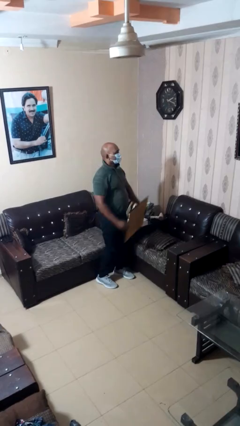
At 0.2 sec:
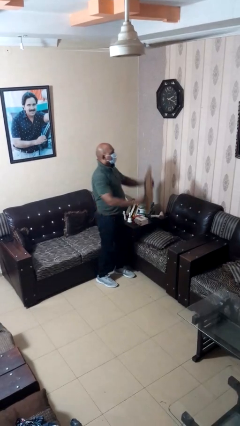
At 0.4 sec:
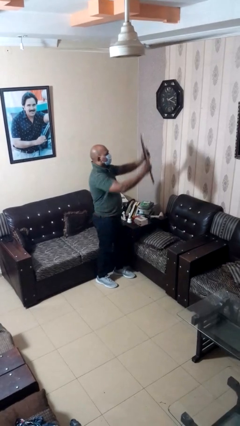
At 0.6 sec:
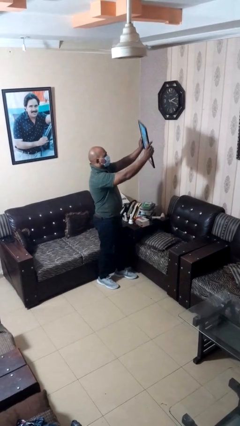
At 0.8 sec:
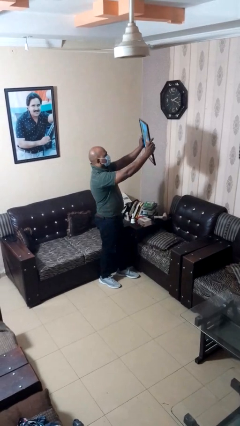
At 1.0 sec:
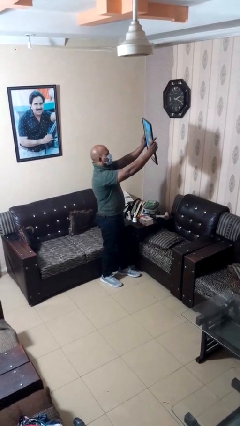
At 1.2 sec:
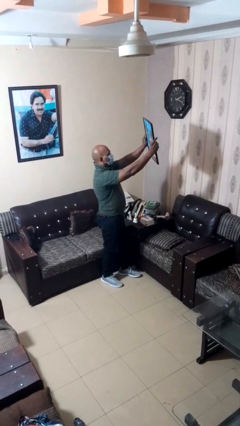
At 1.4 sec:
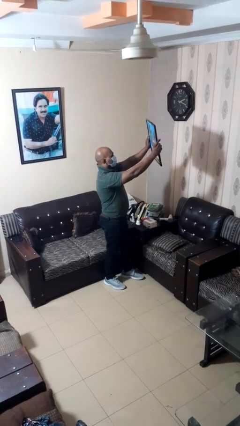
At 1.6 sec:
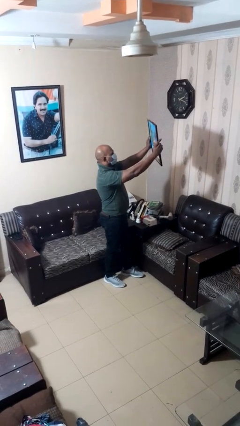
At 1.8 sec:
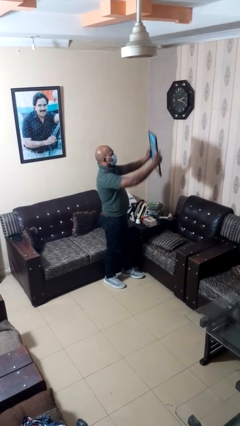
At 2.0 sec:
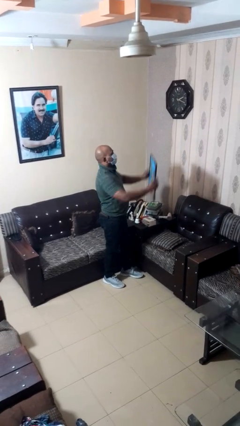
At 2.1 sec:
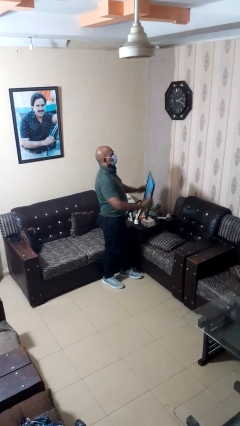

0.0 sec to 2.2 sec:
person holds object above head

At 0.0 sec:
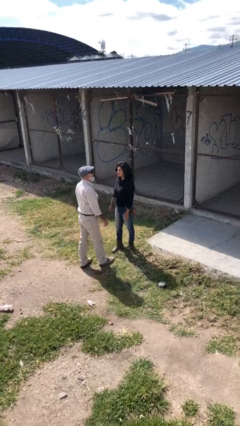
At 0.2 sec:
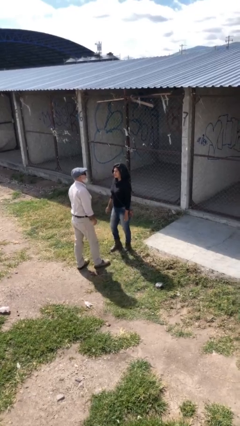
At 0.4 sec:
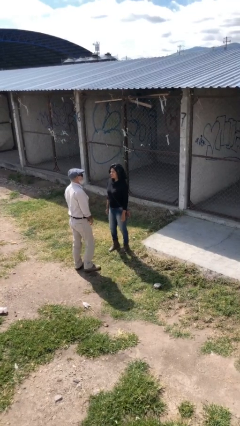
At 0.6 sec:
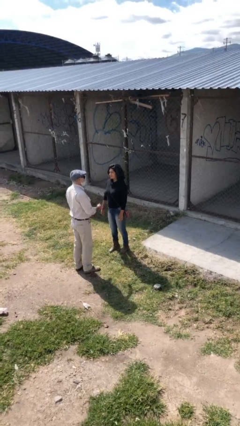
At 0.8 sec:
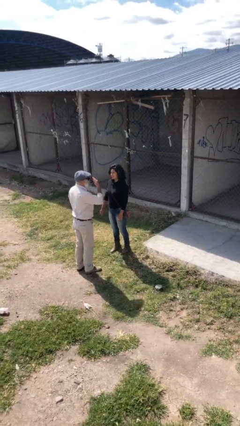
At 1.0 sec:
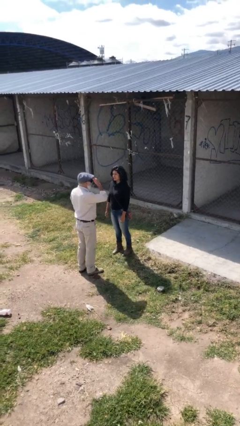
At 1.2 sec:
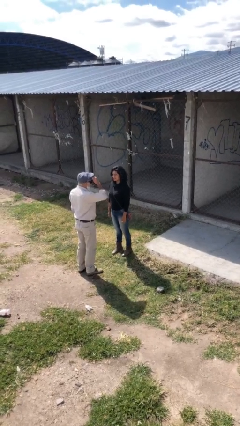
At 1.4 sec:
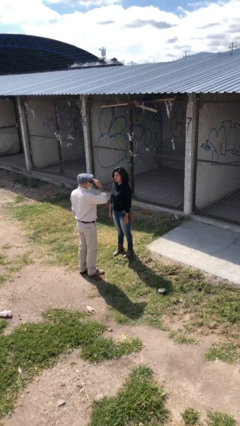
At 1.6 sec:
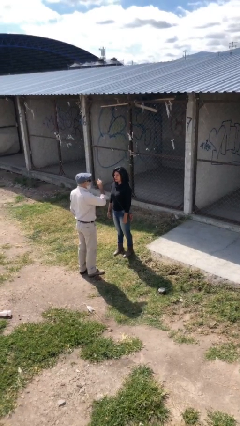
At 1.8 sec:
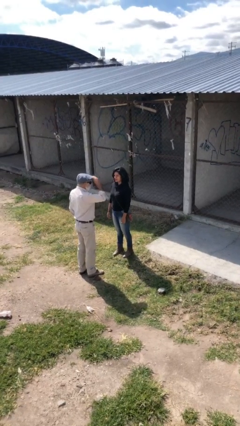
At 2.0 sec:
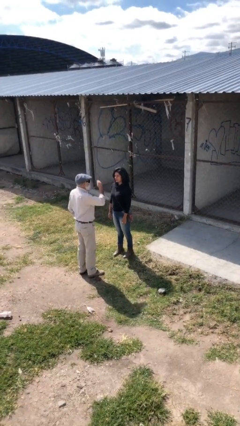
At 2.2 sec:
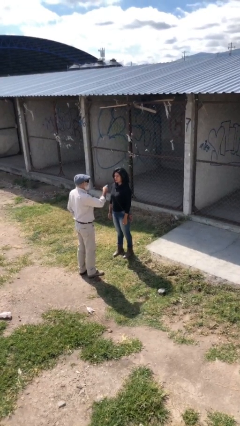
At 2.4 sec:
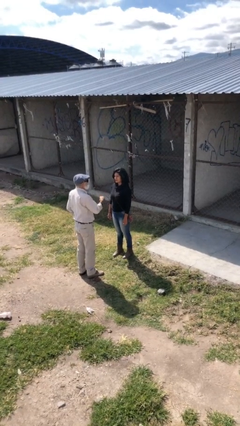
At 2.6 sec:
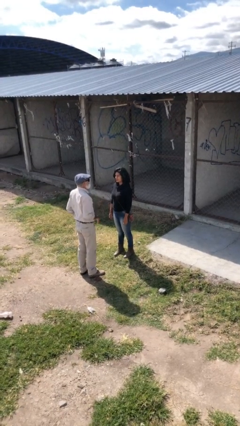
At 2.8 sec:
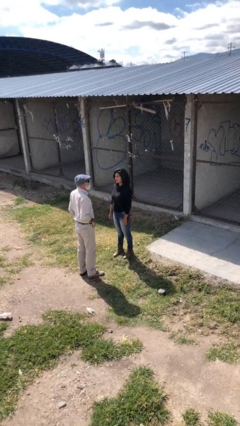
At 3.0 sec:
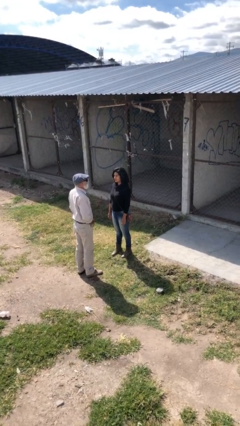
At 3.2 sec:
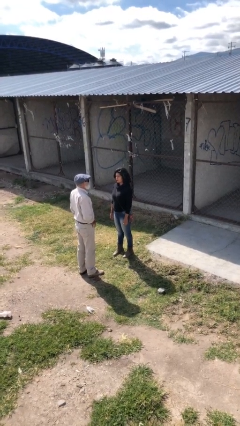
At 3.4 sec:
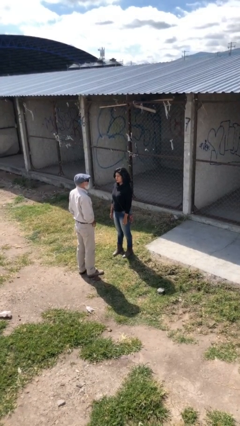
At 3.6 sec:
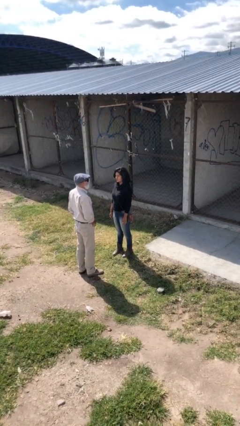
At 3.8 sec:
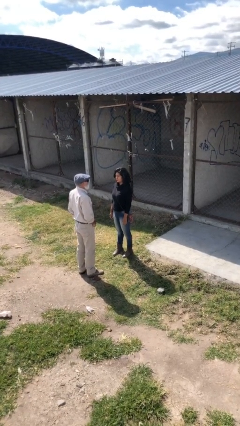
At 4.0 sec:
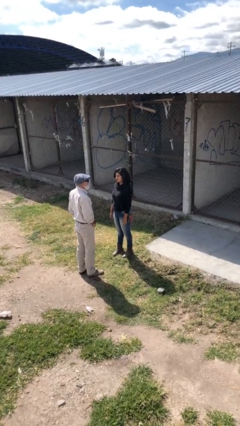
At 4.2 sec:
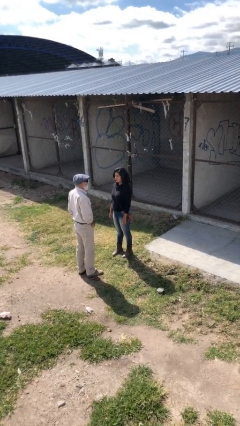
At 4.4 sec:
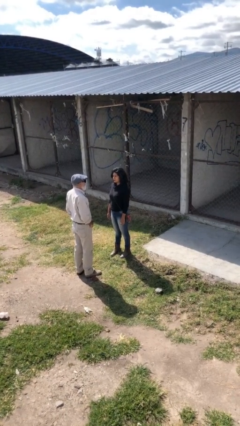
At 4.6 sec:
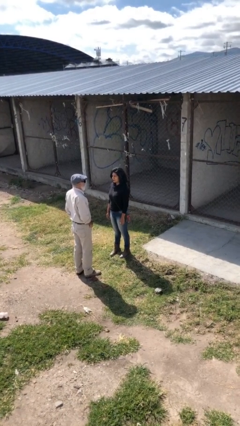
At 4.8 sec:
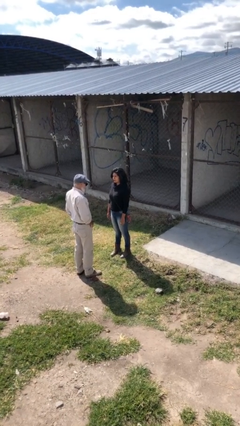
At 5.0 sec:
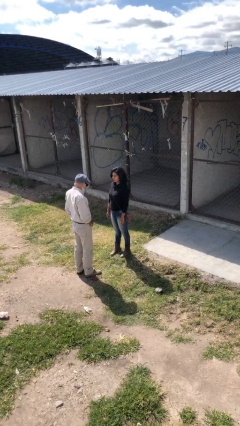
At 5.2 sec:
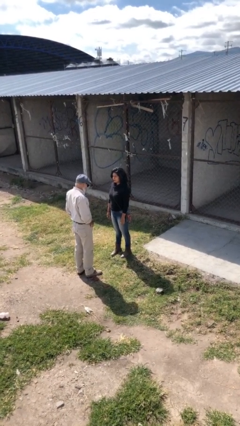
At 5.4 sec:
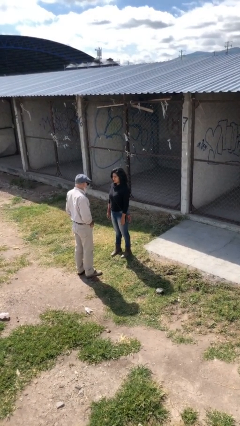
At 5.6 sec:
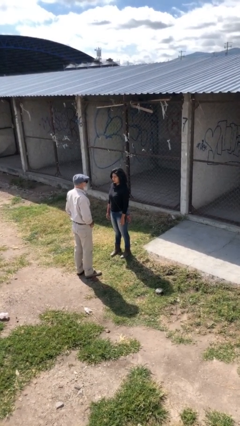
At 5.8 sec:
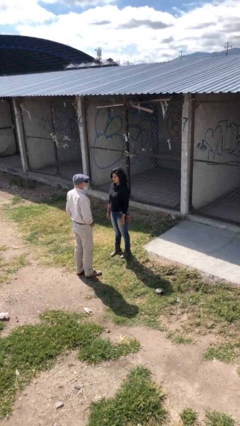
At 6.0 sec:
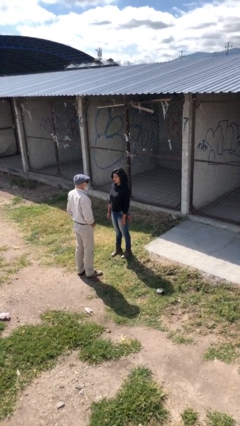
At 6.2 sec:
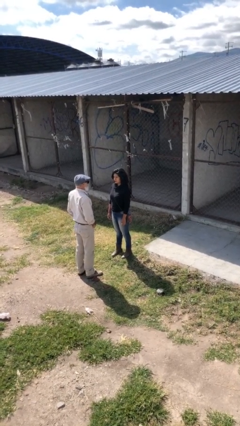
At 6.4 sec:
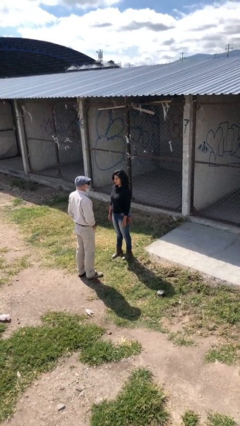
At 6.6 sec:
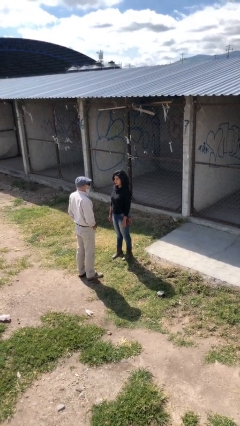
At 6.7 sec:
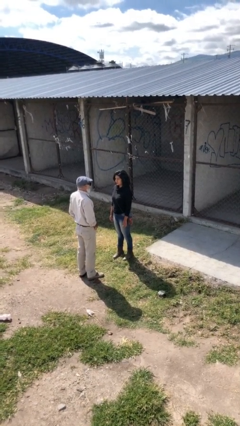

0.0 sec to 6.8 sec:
person talks to person

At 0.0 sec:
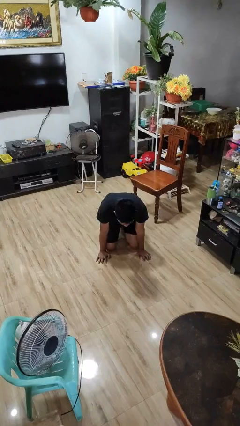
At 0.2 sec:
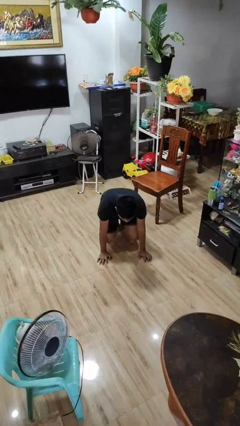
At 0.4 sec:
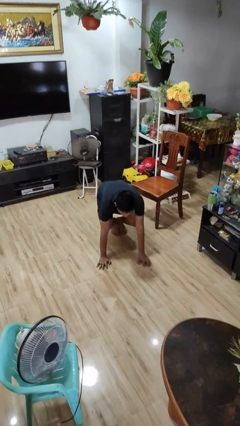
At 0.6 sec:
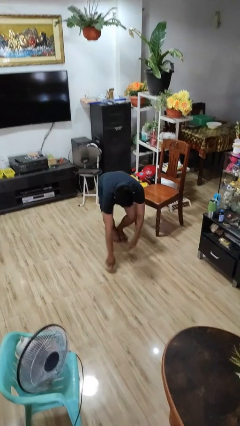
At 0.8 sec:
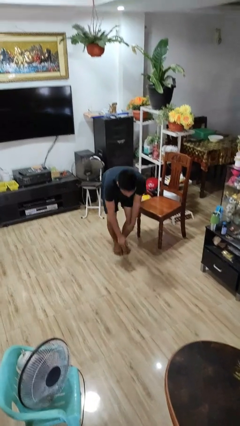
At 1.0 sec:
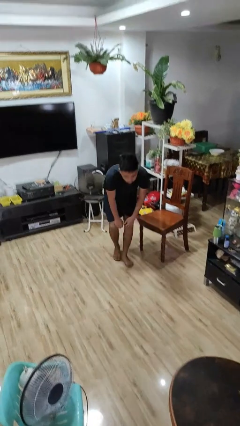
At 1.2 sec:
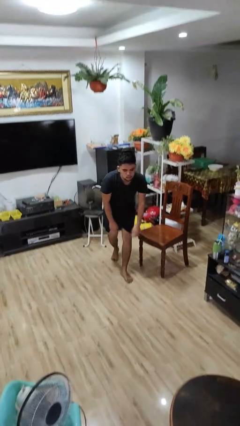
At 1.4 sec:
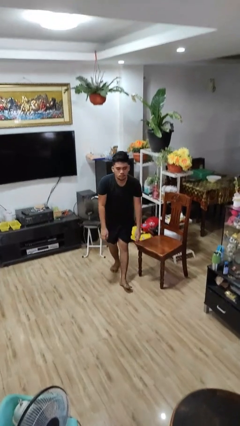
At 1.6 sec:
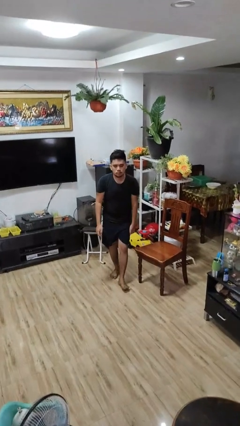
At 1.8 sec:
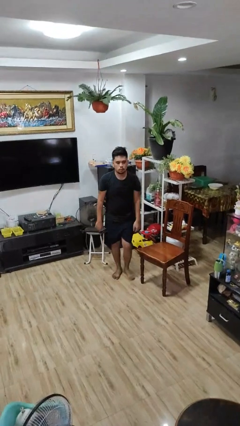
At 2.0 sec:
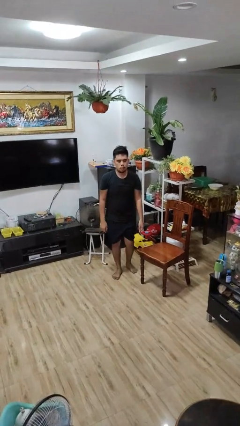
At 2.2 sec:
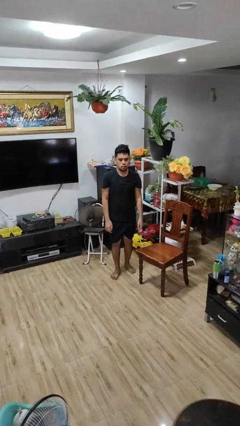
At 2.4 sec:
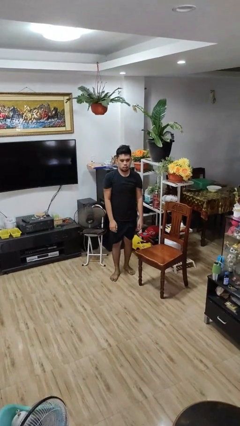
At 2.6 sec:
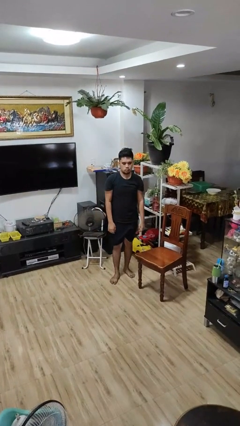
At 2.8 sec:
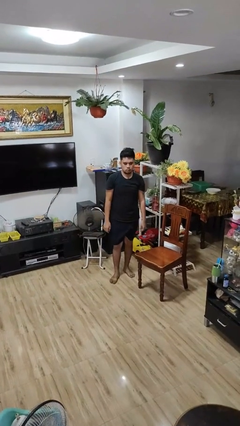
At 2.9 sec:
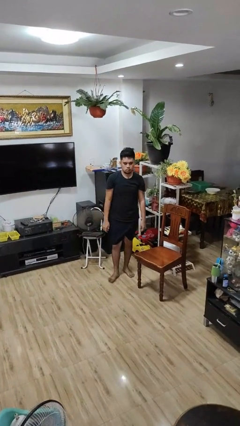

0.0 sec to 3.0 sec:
person stands up from floor

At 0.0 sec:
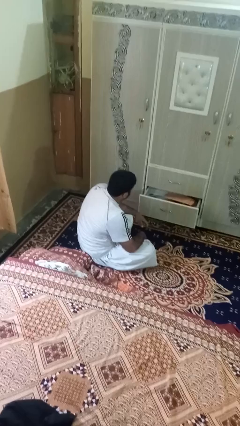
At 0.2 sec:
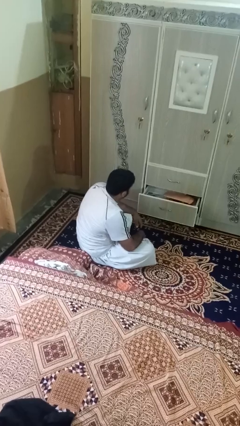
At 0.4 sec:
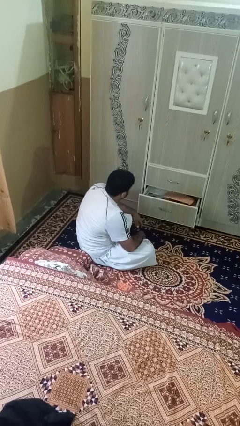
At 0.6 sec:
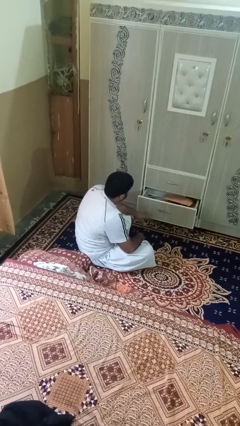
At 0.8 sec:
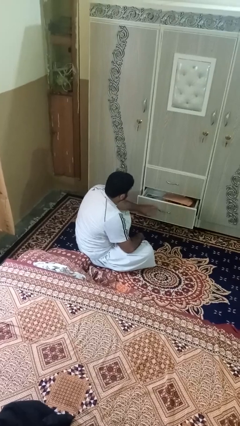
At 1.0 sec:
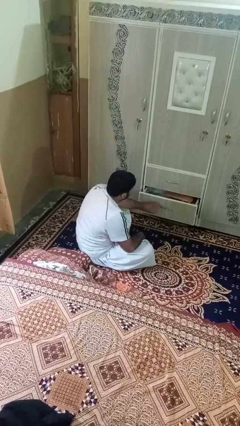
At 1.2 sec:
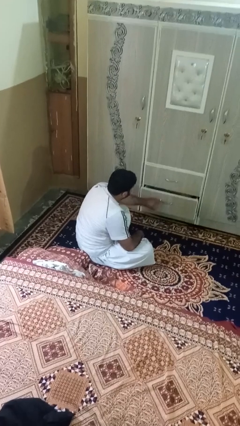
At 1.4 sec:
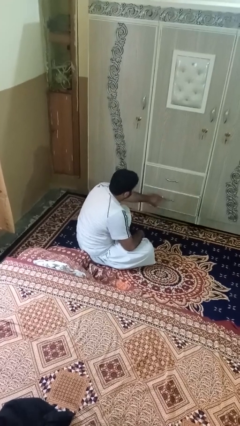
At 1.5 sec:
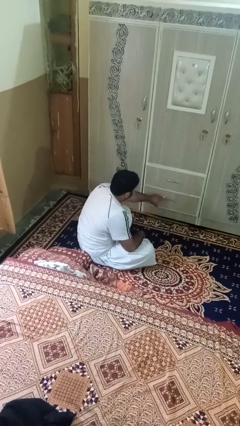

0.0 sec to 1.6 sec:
person closes dresser drawer

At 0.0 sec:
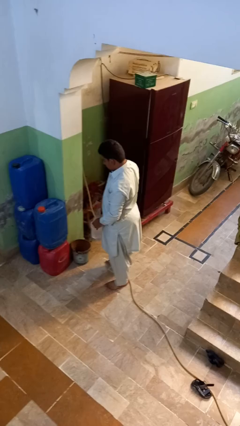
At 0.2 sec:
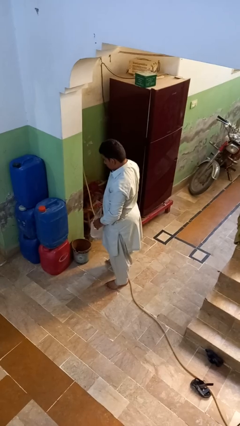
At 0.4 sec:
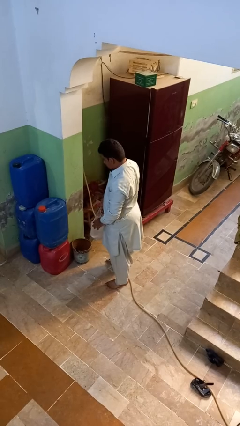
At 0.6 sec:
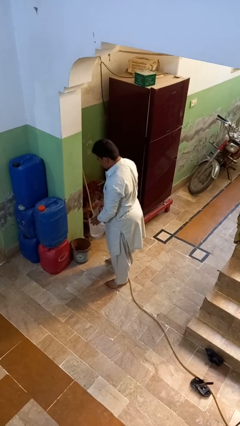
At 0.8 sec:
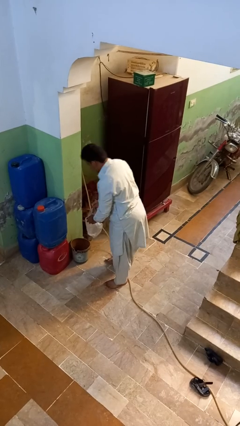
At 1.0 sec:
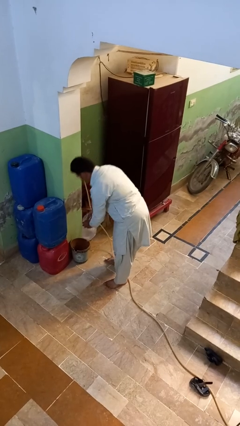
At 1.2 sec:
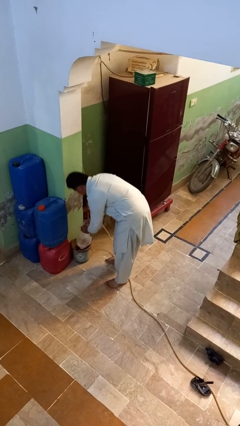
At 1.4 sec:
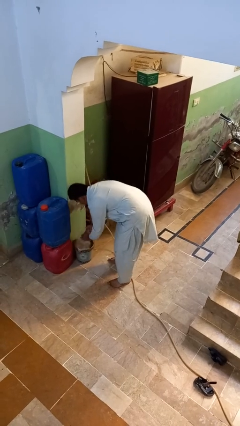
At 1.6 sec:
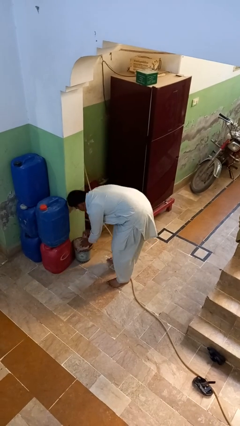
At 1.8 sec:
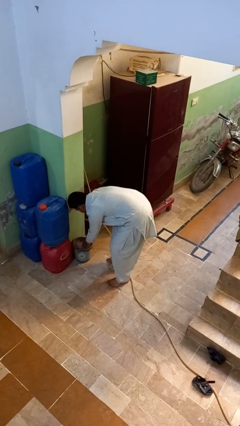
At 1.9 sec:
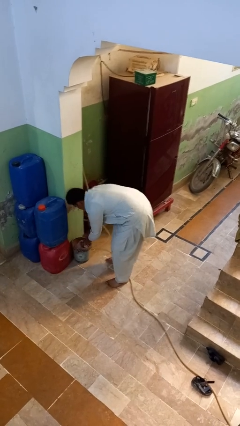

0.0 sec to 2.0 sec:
person inserts trashbag into trashcan

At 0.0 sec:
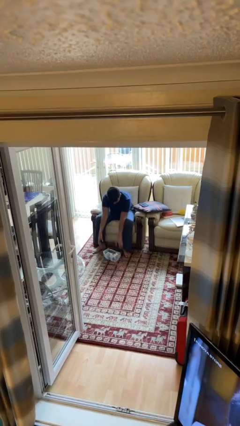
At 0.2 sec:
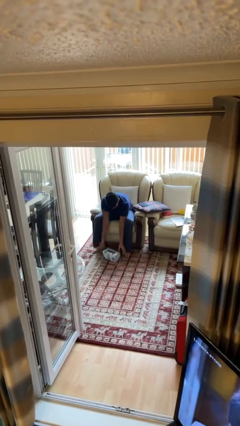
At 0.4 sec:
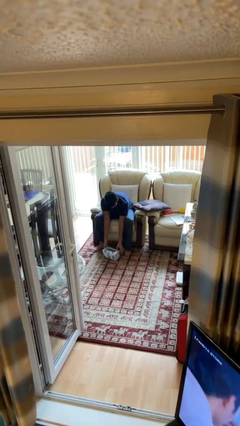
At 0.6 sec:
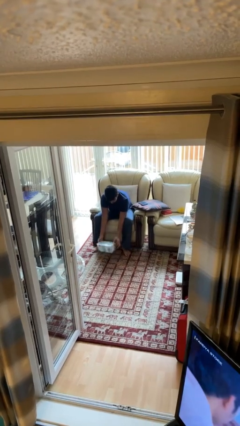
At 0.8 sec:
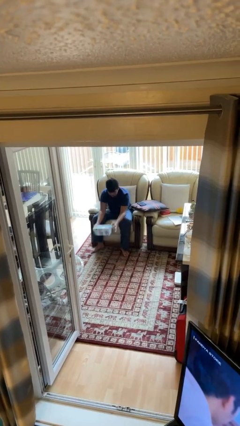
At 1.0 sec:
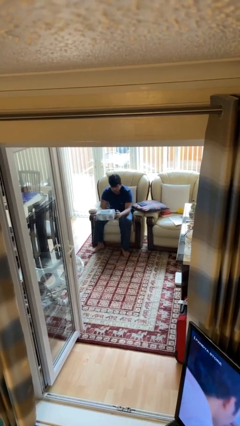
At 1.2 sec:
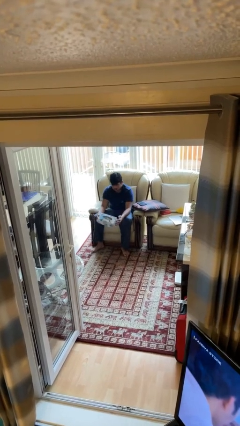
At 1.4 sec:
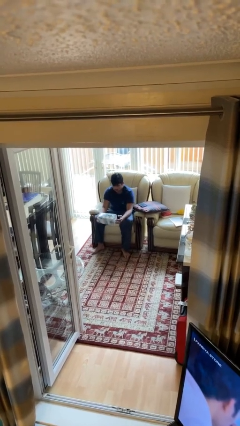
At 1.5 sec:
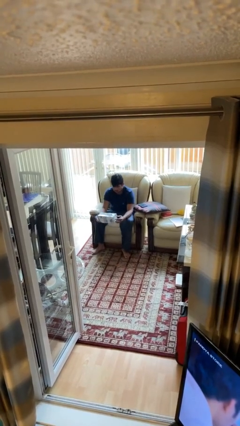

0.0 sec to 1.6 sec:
person picks up object from floor

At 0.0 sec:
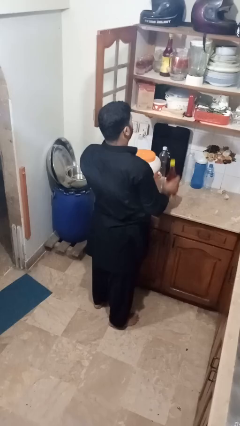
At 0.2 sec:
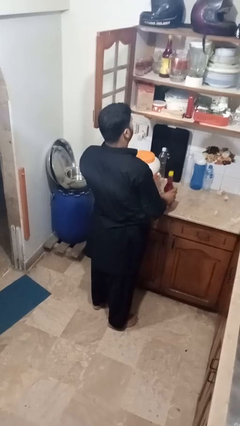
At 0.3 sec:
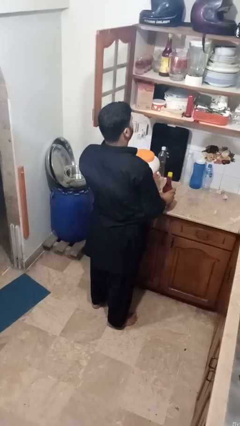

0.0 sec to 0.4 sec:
person picks up object from cabinet
